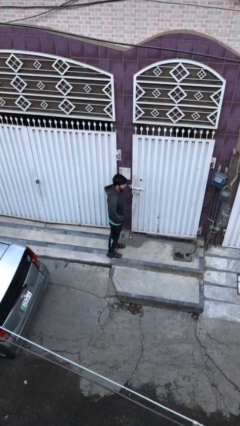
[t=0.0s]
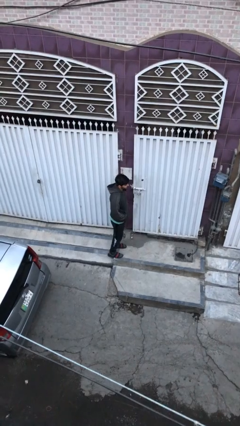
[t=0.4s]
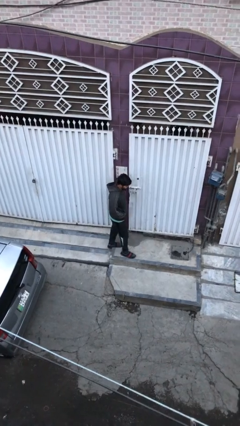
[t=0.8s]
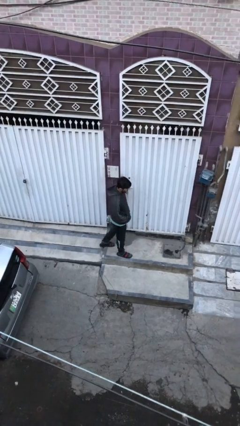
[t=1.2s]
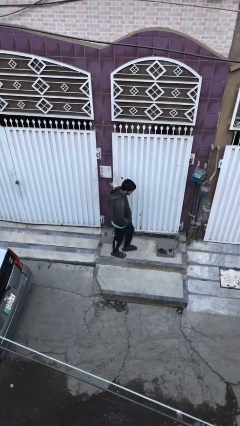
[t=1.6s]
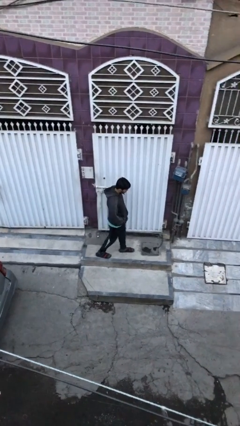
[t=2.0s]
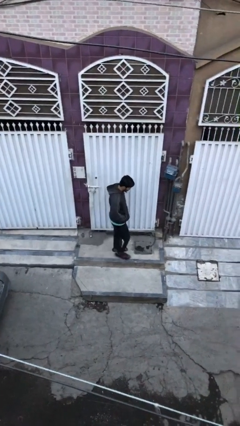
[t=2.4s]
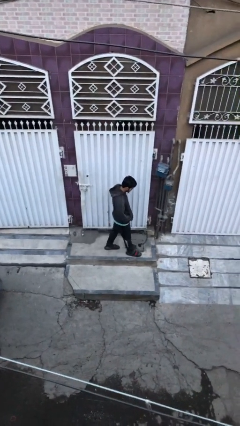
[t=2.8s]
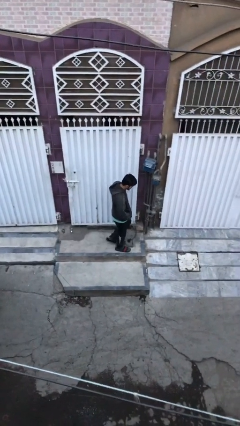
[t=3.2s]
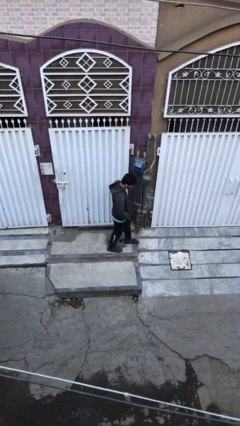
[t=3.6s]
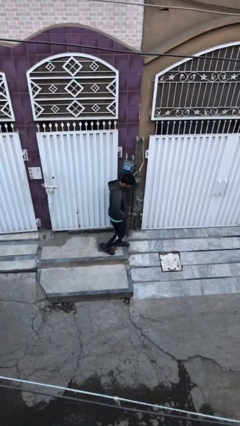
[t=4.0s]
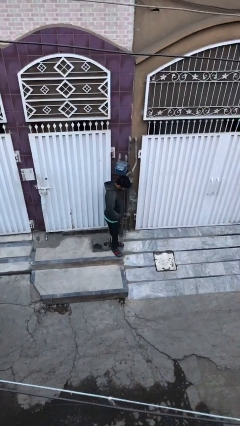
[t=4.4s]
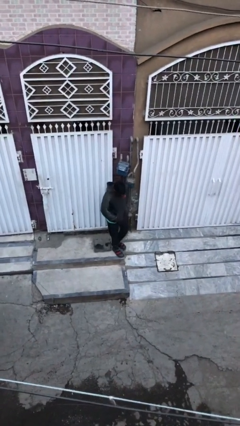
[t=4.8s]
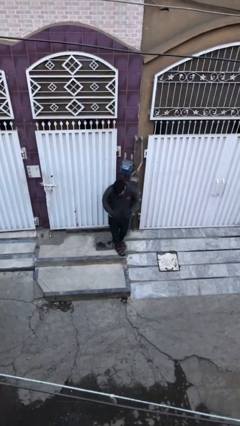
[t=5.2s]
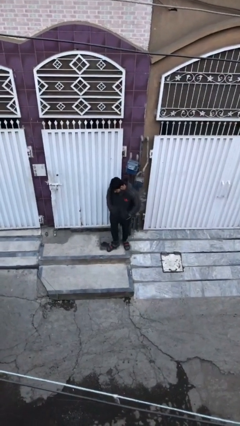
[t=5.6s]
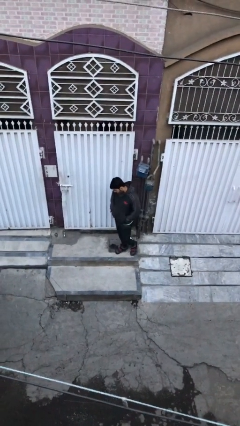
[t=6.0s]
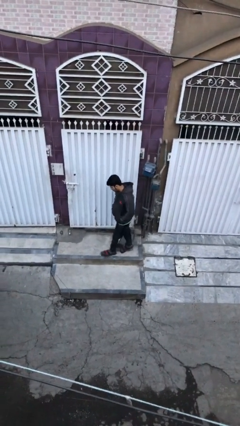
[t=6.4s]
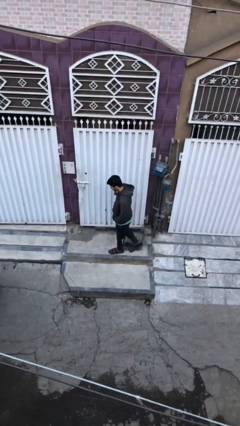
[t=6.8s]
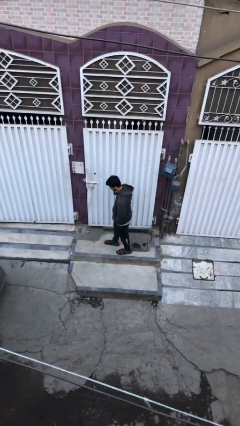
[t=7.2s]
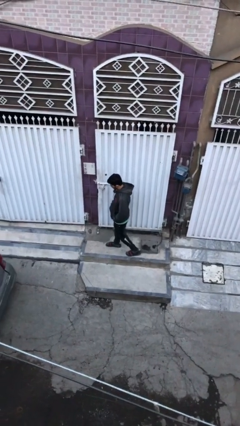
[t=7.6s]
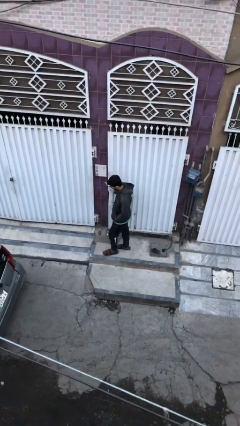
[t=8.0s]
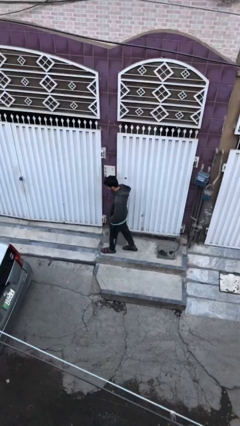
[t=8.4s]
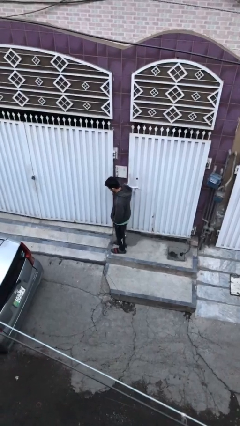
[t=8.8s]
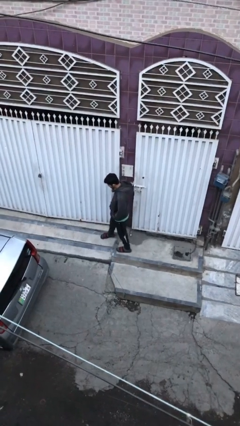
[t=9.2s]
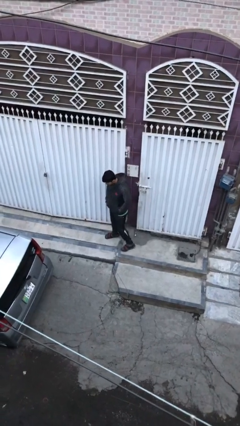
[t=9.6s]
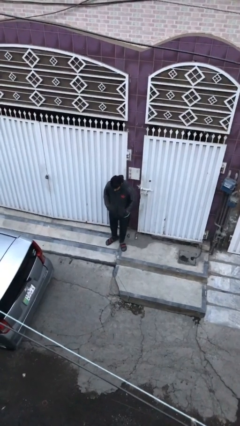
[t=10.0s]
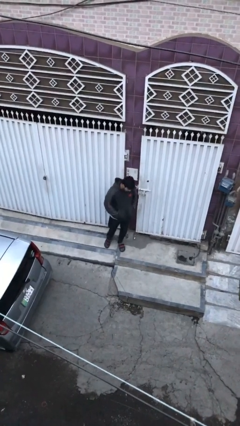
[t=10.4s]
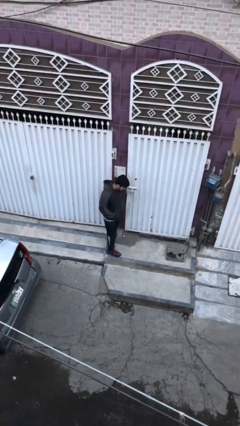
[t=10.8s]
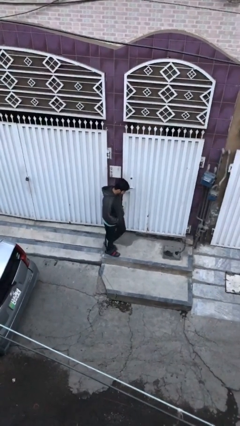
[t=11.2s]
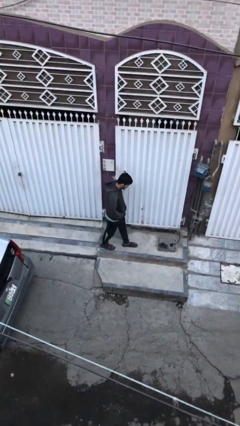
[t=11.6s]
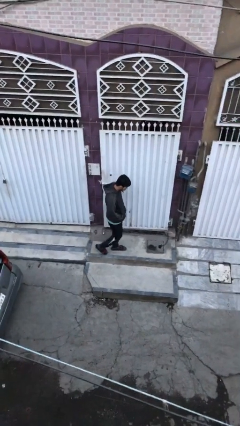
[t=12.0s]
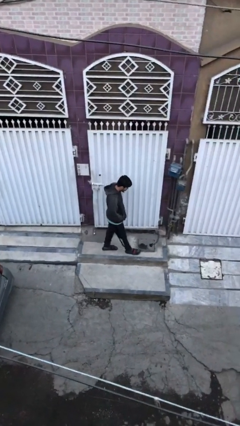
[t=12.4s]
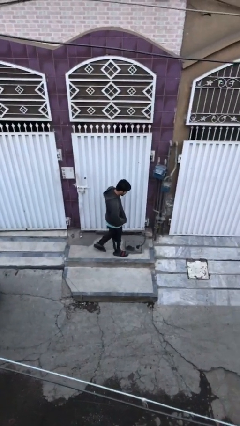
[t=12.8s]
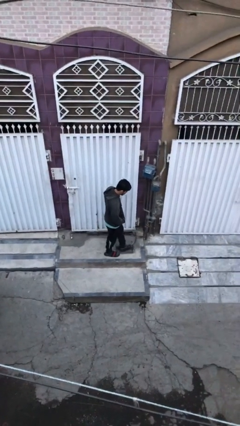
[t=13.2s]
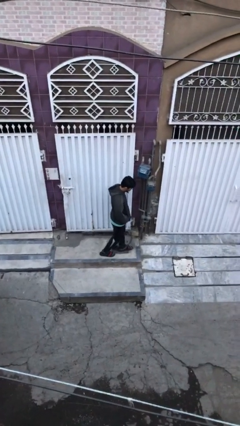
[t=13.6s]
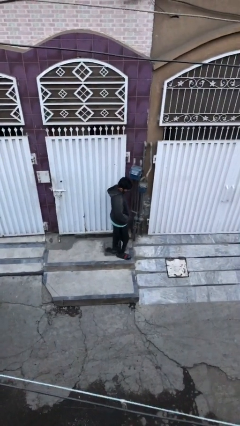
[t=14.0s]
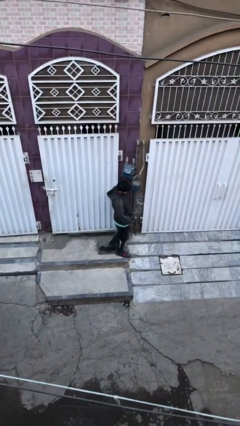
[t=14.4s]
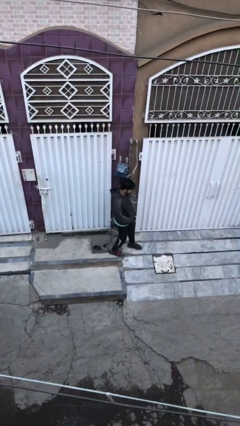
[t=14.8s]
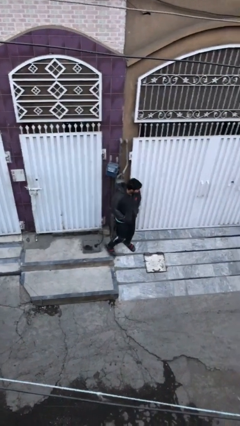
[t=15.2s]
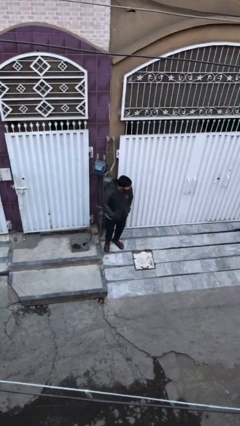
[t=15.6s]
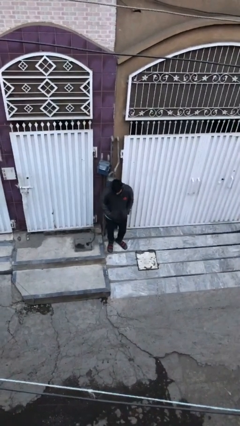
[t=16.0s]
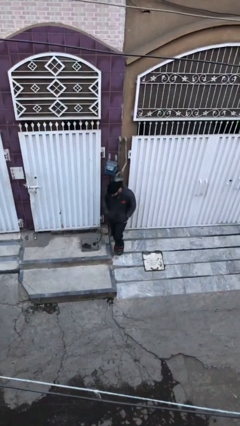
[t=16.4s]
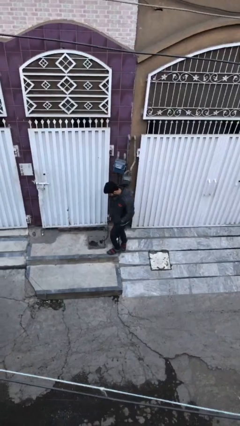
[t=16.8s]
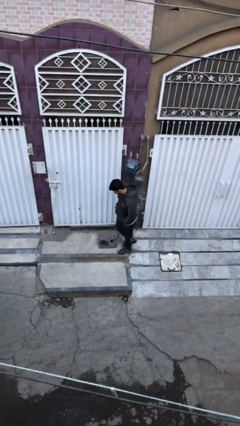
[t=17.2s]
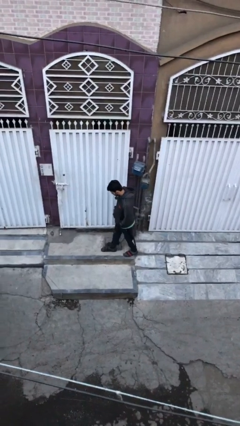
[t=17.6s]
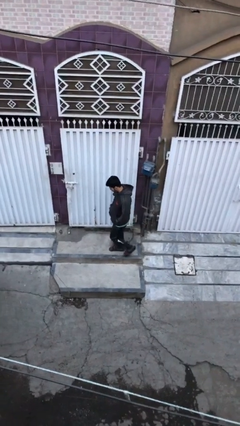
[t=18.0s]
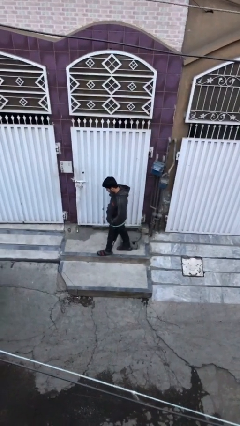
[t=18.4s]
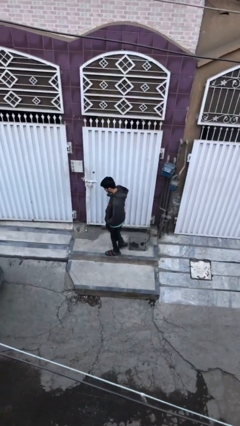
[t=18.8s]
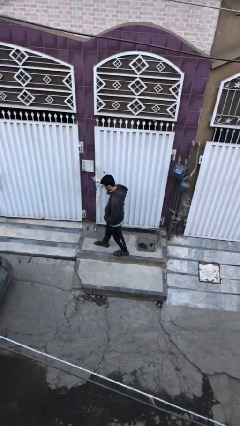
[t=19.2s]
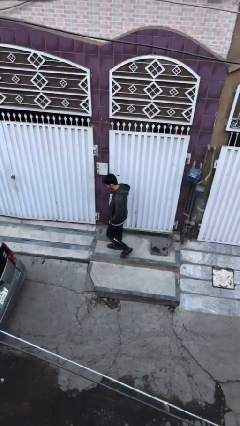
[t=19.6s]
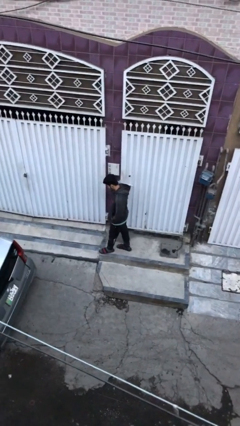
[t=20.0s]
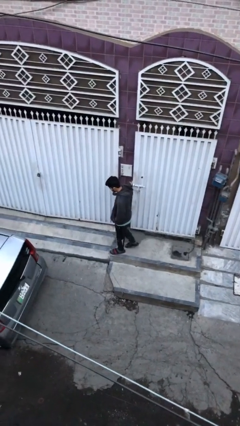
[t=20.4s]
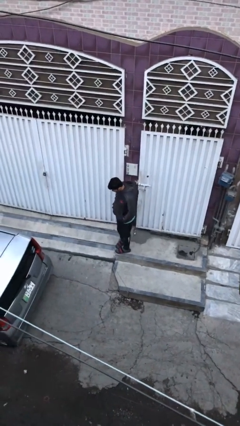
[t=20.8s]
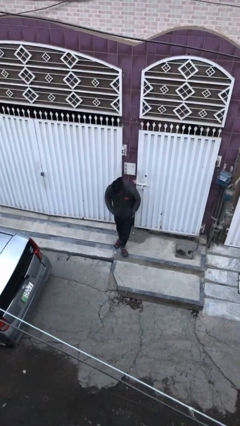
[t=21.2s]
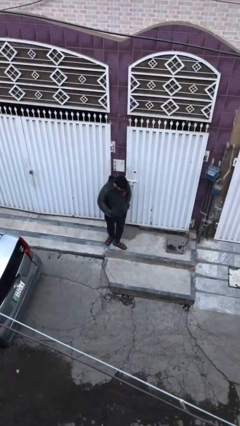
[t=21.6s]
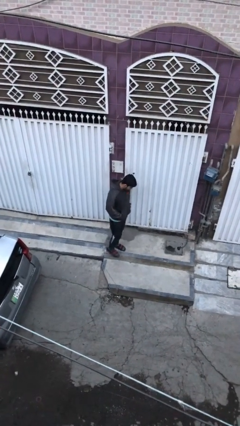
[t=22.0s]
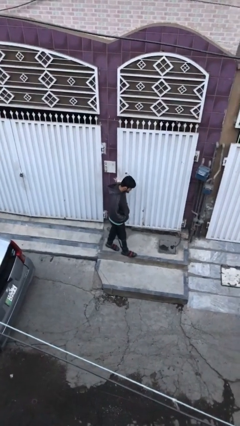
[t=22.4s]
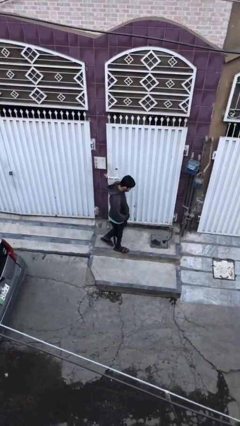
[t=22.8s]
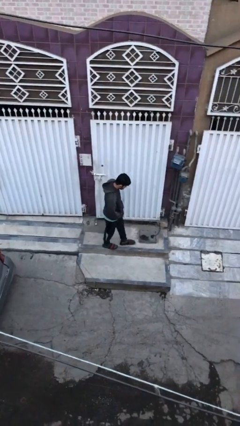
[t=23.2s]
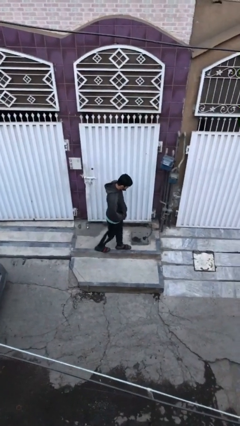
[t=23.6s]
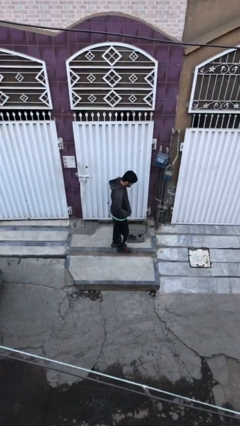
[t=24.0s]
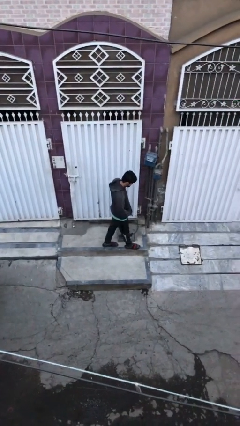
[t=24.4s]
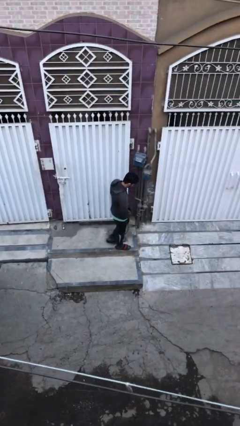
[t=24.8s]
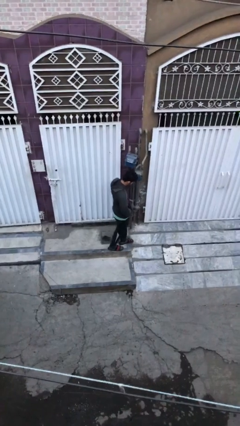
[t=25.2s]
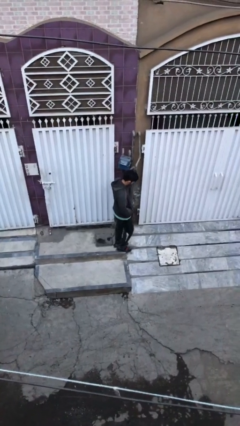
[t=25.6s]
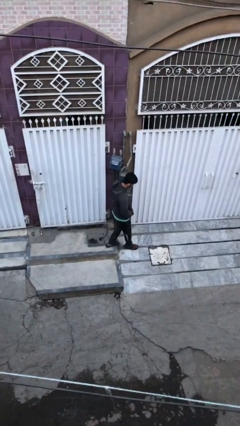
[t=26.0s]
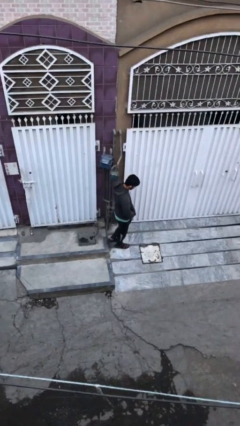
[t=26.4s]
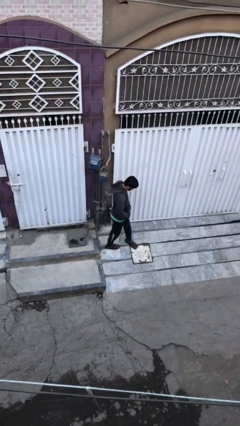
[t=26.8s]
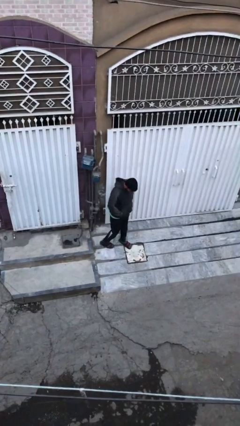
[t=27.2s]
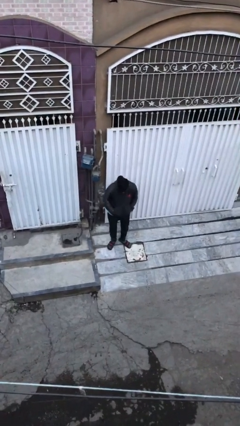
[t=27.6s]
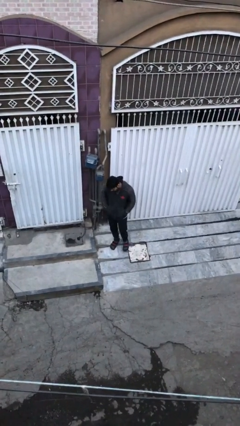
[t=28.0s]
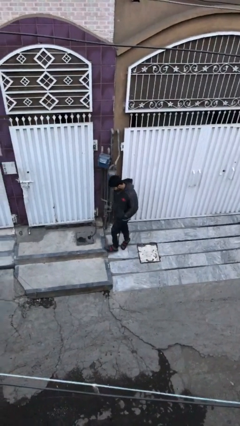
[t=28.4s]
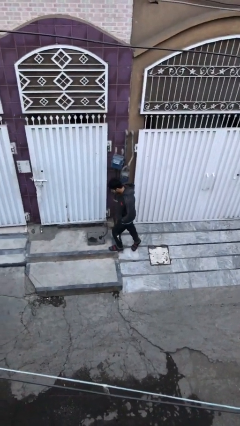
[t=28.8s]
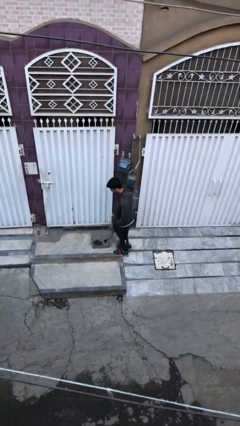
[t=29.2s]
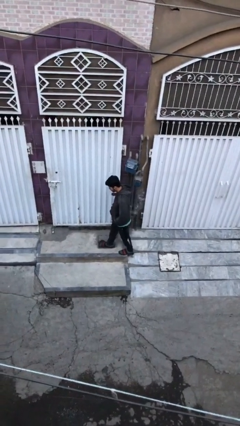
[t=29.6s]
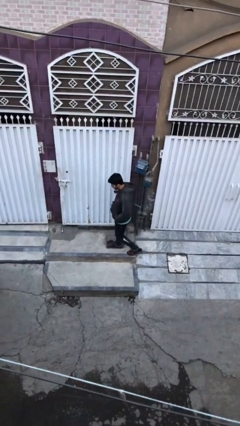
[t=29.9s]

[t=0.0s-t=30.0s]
person walks

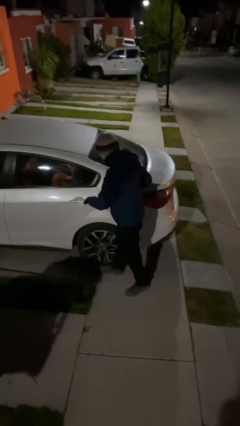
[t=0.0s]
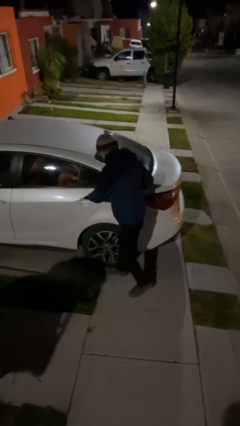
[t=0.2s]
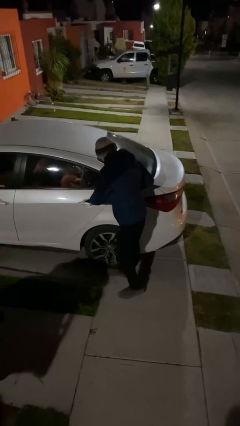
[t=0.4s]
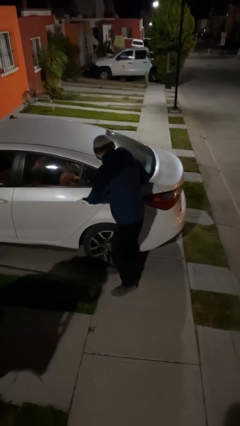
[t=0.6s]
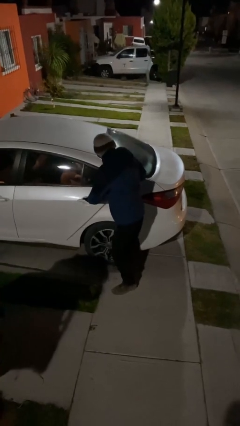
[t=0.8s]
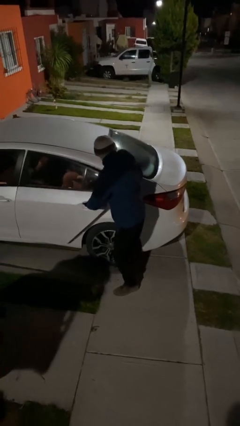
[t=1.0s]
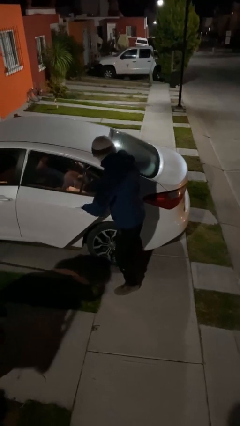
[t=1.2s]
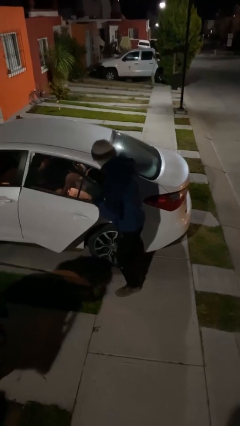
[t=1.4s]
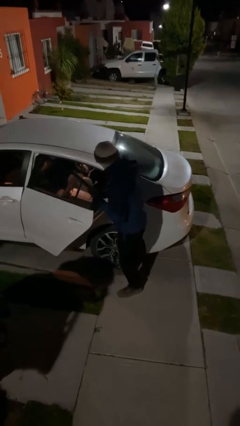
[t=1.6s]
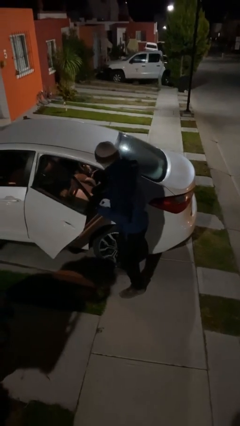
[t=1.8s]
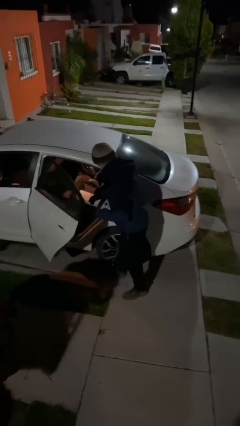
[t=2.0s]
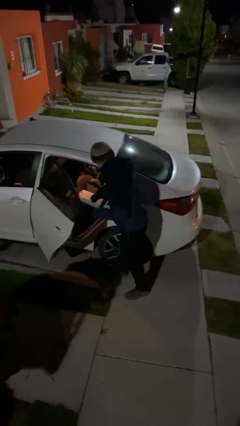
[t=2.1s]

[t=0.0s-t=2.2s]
person opens car door

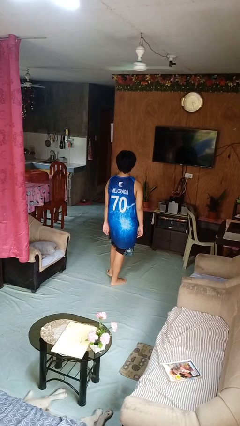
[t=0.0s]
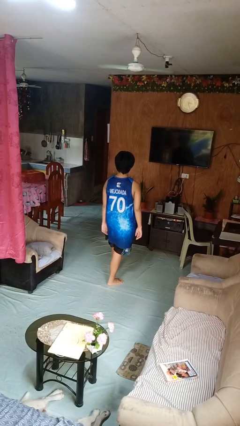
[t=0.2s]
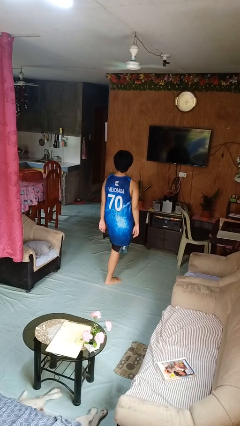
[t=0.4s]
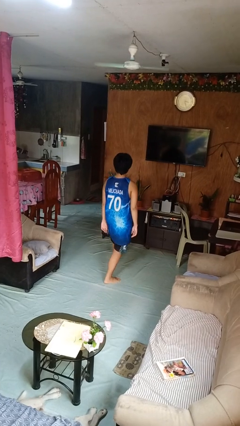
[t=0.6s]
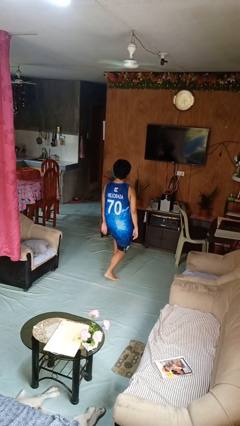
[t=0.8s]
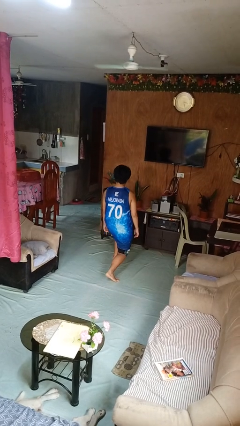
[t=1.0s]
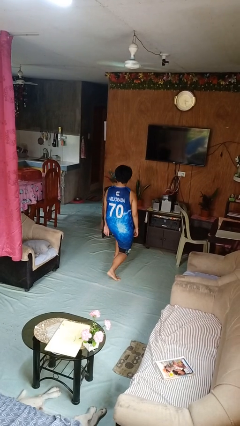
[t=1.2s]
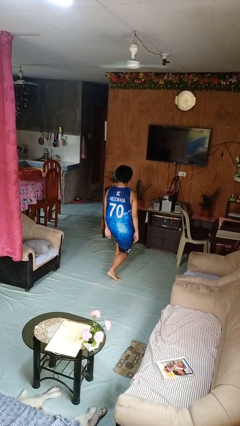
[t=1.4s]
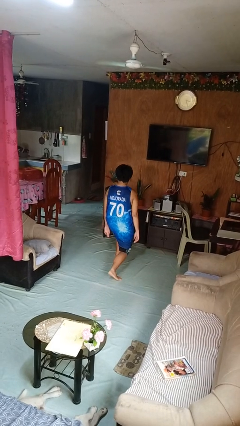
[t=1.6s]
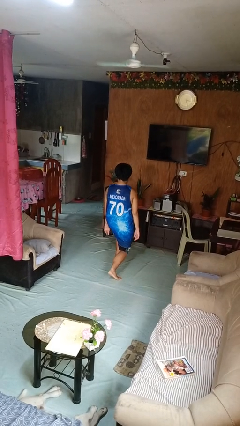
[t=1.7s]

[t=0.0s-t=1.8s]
person exercises with lunges
